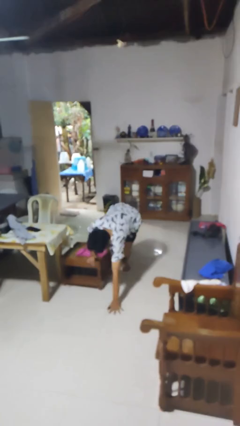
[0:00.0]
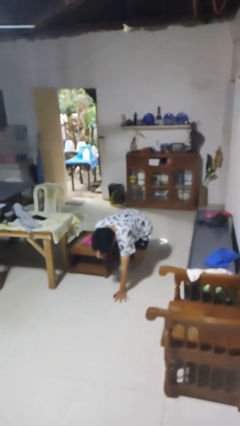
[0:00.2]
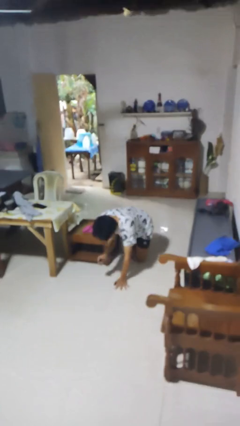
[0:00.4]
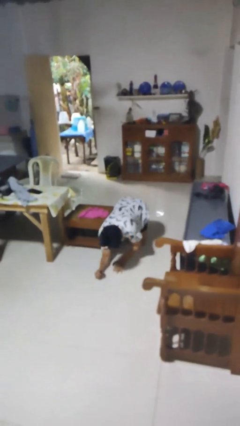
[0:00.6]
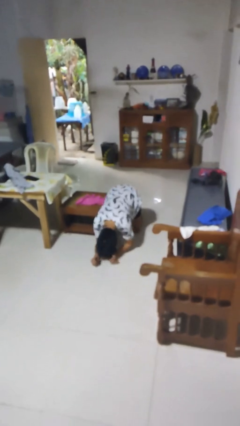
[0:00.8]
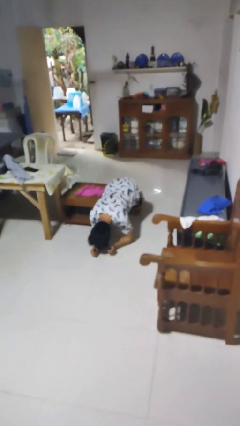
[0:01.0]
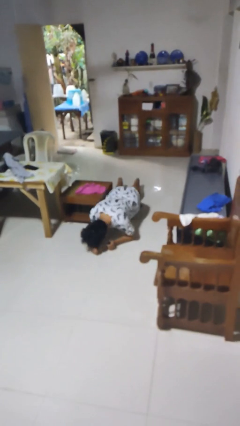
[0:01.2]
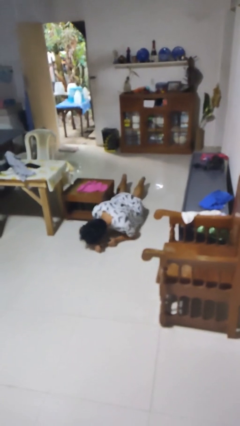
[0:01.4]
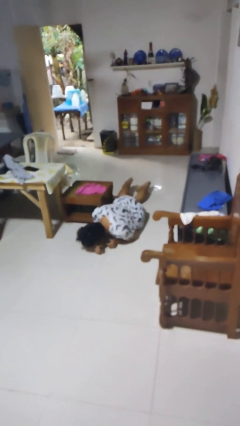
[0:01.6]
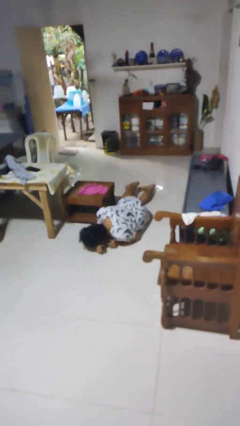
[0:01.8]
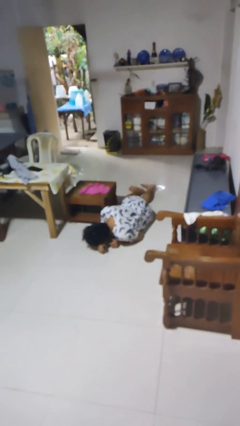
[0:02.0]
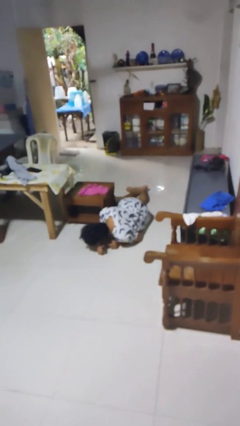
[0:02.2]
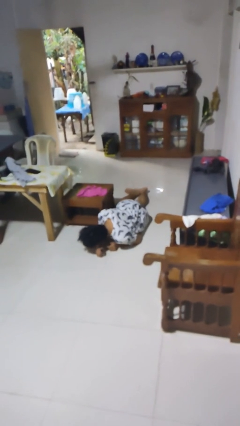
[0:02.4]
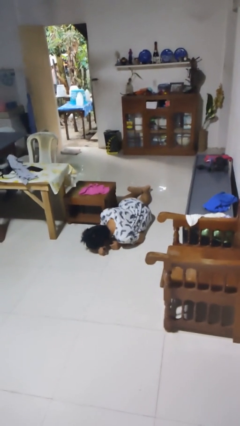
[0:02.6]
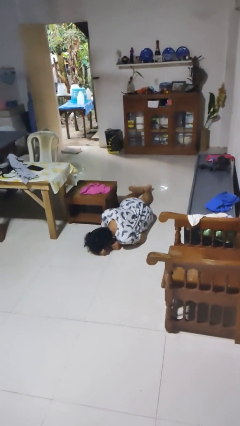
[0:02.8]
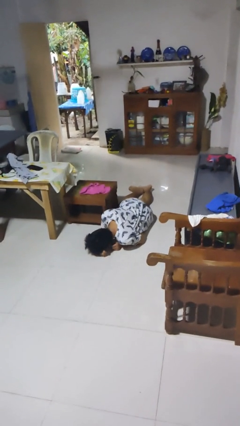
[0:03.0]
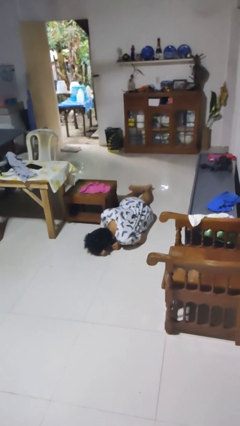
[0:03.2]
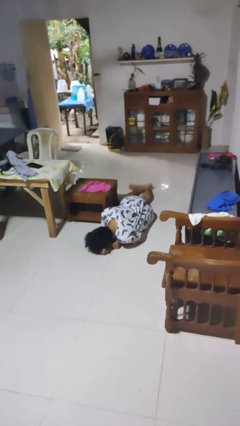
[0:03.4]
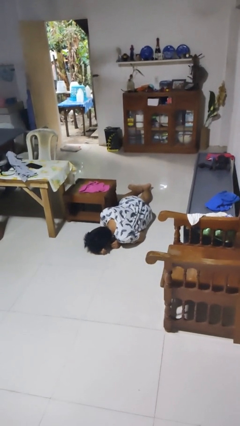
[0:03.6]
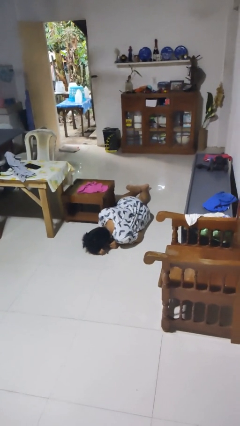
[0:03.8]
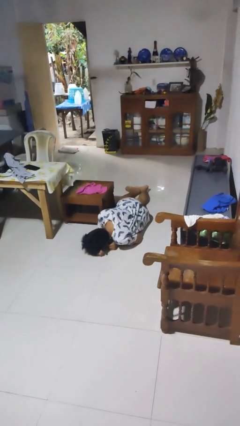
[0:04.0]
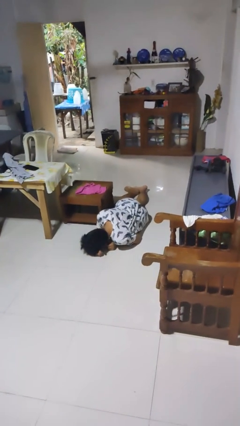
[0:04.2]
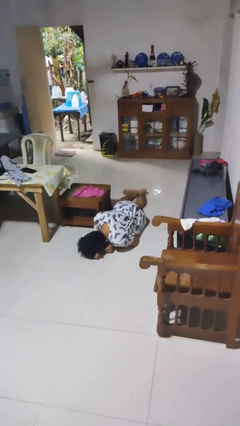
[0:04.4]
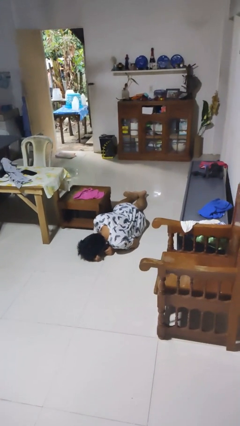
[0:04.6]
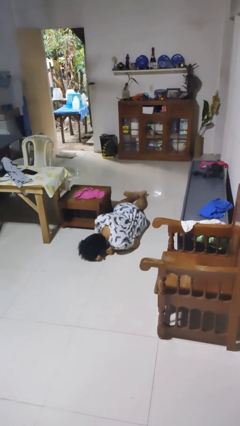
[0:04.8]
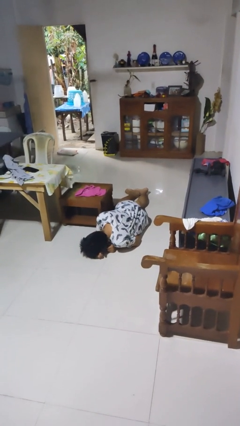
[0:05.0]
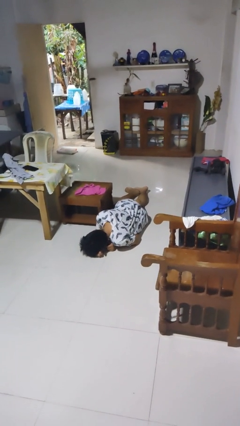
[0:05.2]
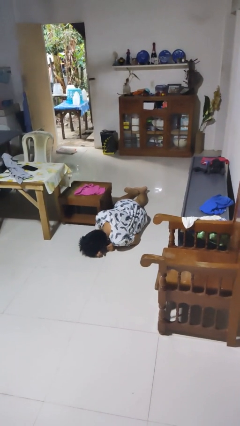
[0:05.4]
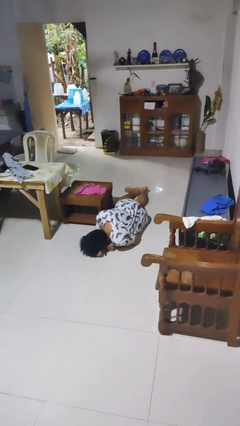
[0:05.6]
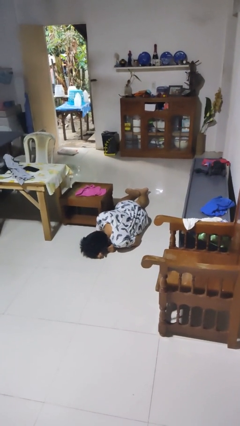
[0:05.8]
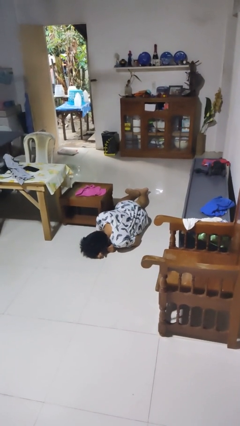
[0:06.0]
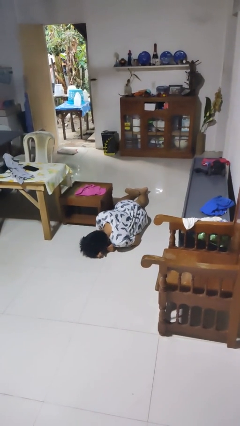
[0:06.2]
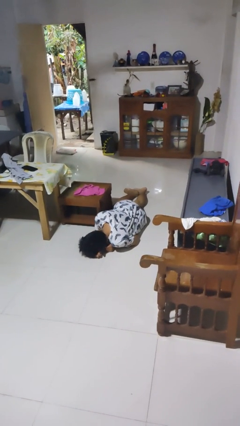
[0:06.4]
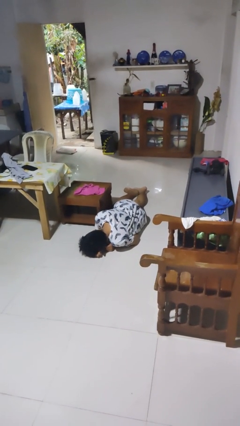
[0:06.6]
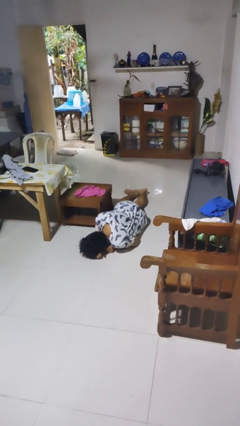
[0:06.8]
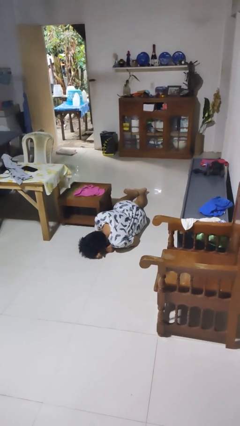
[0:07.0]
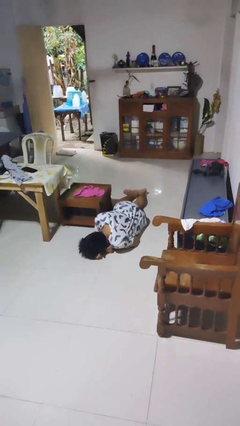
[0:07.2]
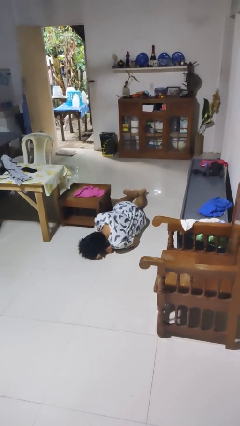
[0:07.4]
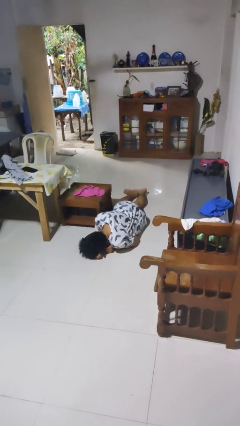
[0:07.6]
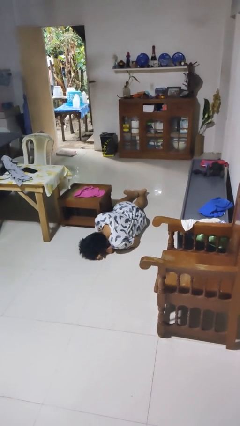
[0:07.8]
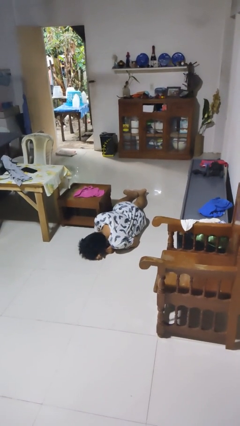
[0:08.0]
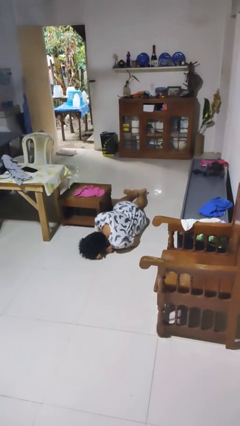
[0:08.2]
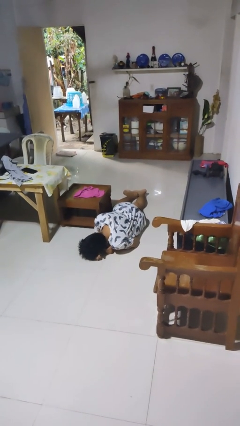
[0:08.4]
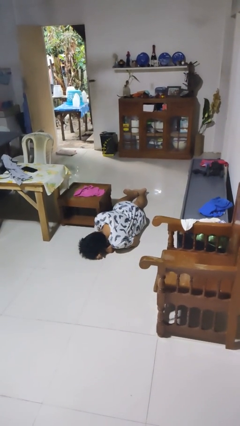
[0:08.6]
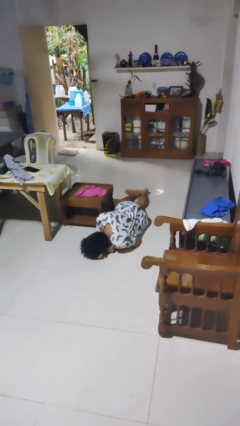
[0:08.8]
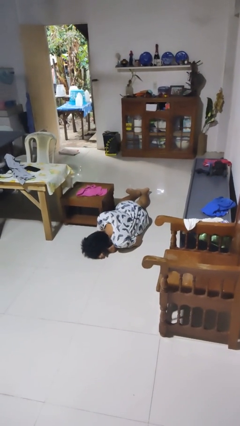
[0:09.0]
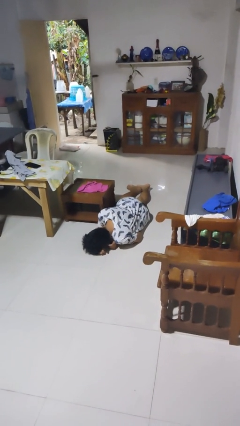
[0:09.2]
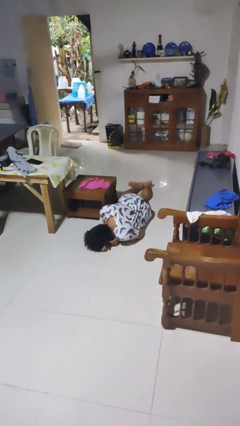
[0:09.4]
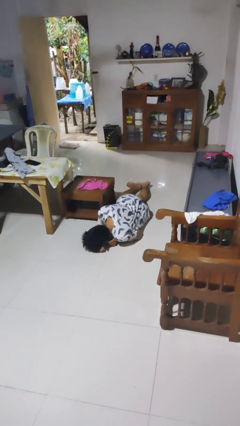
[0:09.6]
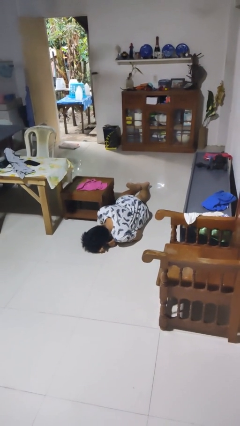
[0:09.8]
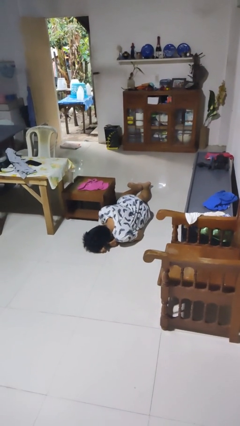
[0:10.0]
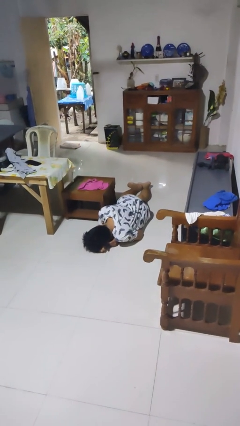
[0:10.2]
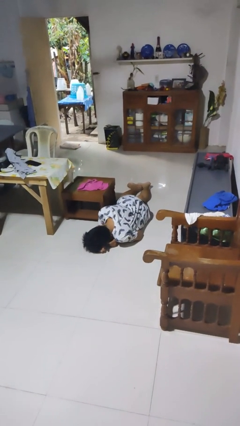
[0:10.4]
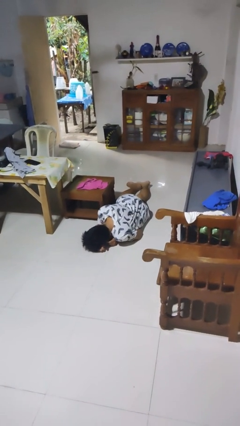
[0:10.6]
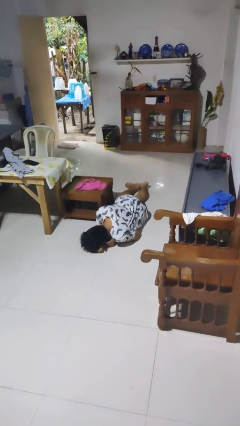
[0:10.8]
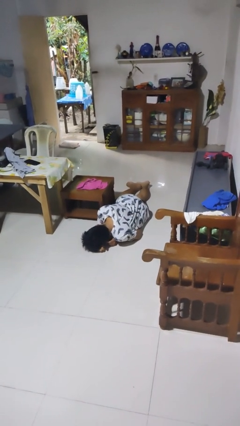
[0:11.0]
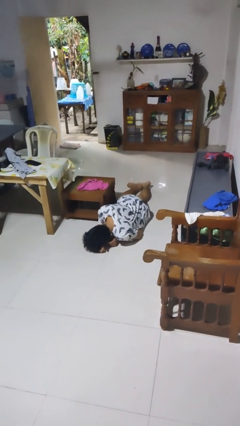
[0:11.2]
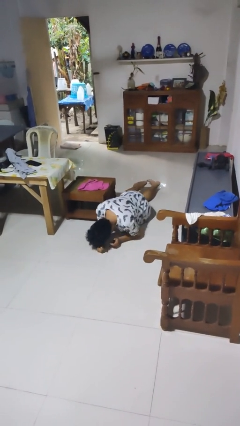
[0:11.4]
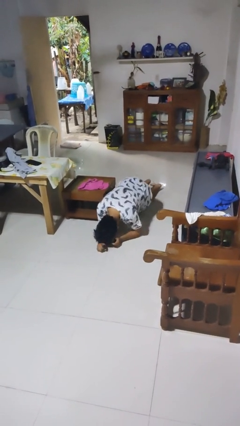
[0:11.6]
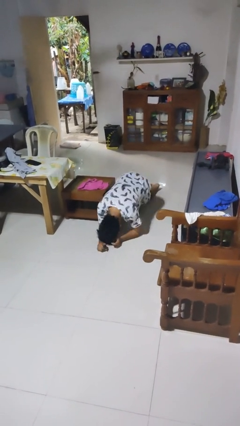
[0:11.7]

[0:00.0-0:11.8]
person lies down on floor

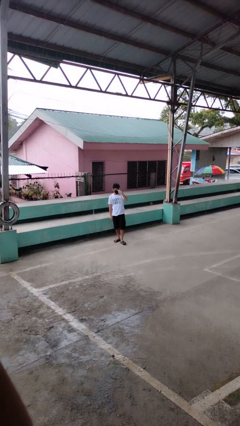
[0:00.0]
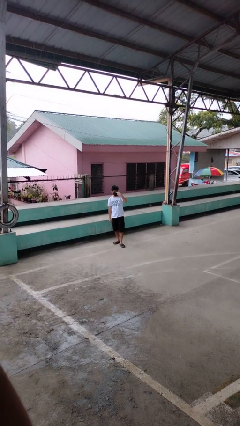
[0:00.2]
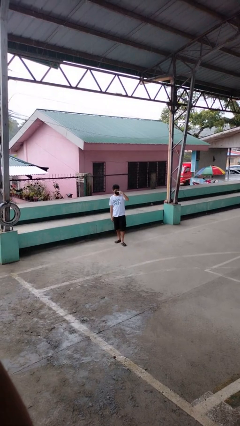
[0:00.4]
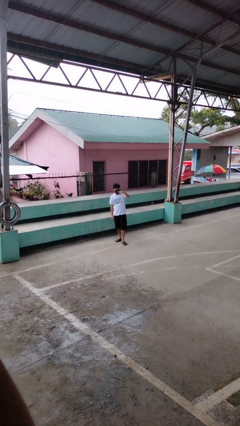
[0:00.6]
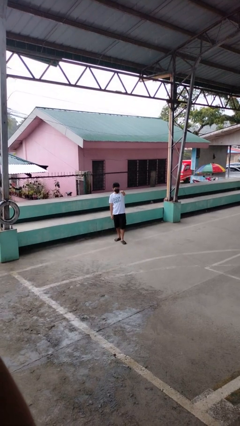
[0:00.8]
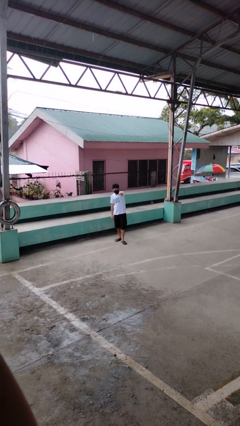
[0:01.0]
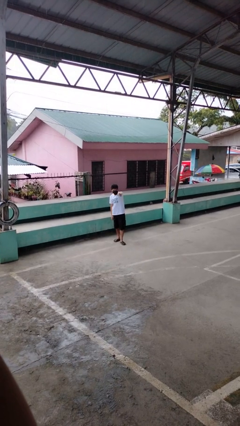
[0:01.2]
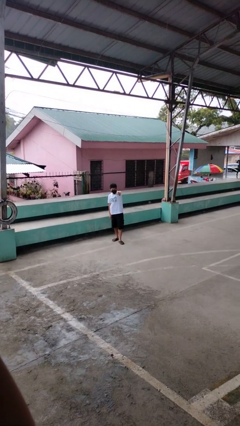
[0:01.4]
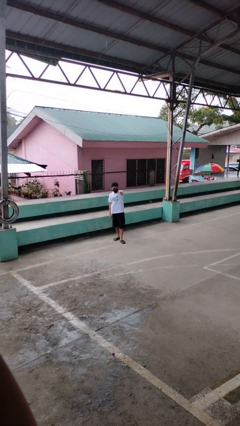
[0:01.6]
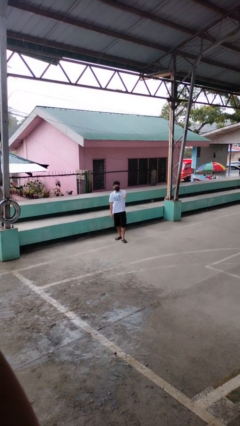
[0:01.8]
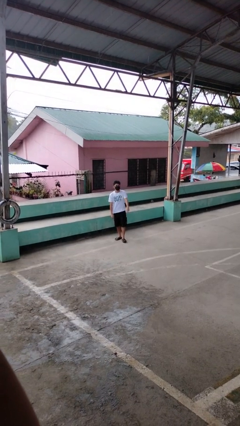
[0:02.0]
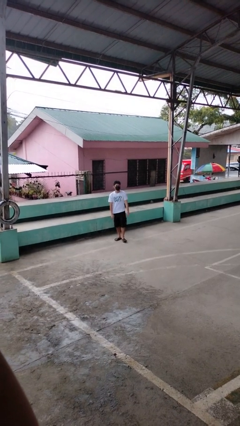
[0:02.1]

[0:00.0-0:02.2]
person gestures watch closely

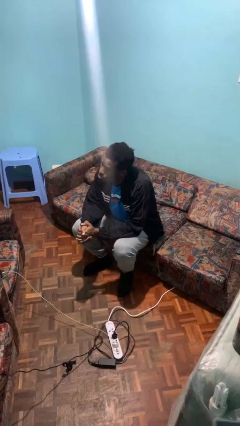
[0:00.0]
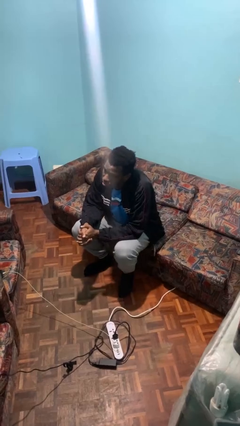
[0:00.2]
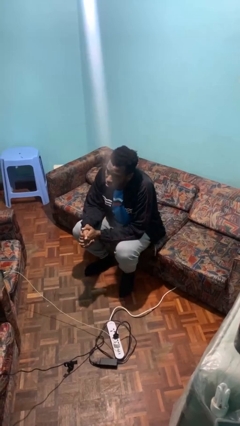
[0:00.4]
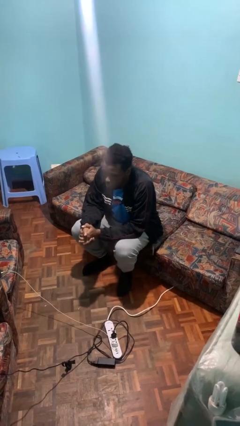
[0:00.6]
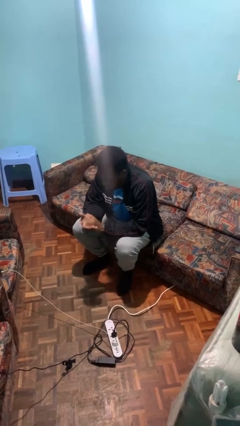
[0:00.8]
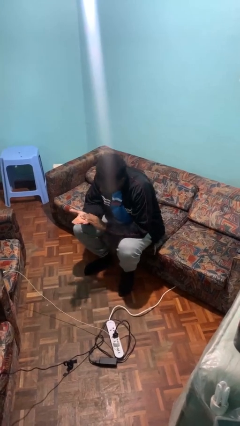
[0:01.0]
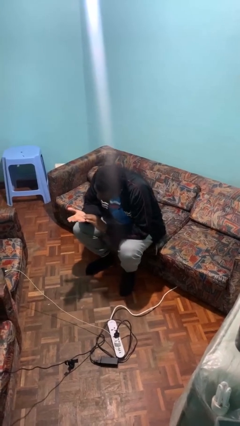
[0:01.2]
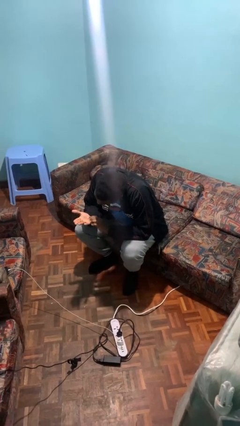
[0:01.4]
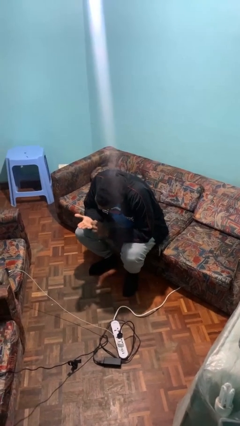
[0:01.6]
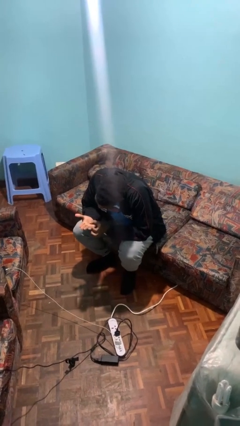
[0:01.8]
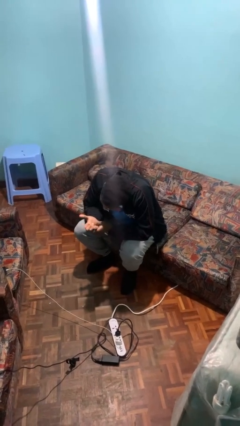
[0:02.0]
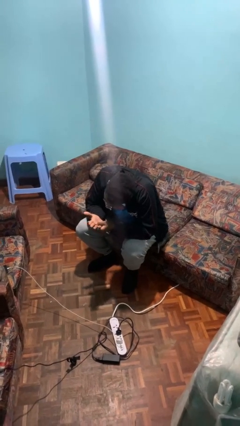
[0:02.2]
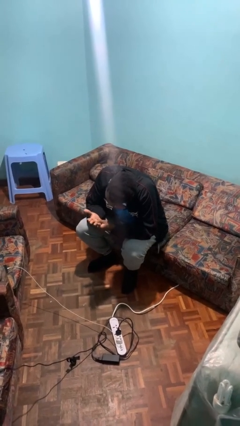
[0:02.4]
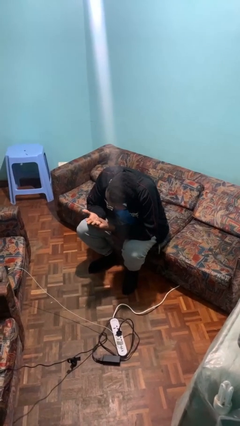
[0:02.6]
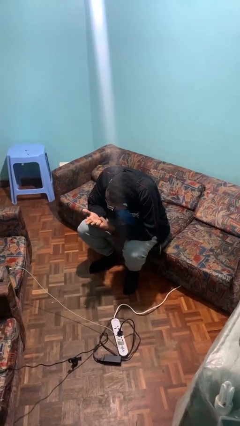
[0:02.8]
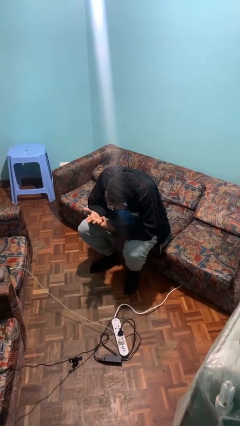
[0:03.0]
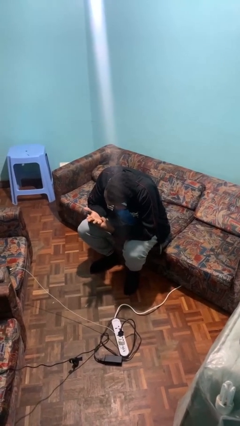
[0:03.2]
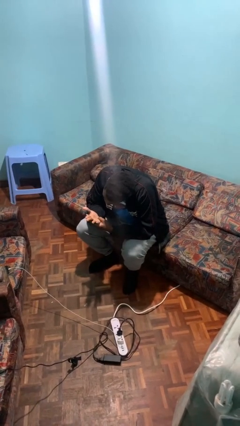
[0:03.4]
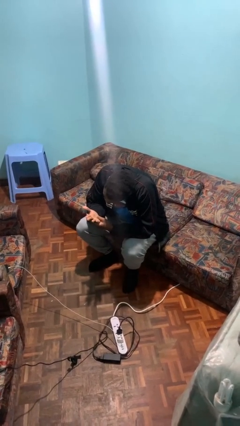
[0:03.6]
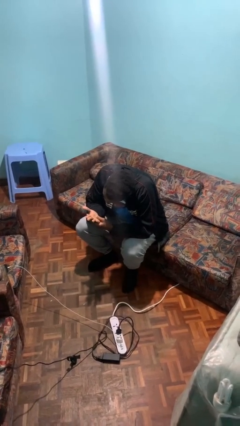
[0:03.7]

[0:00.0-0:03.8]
person looks at hands in lap
